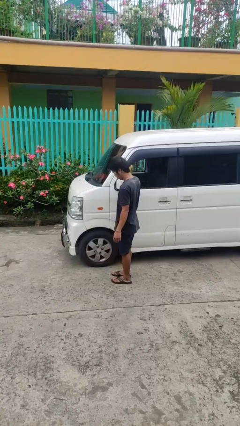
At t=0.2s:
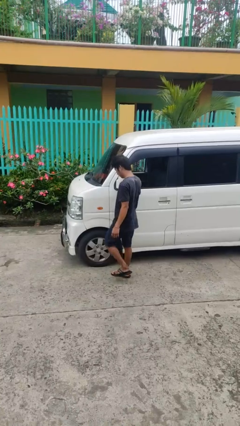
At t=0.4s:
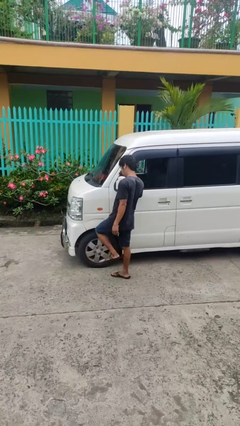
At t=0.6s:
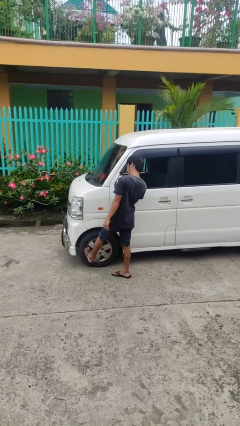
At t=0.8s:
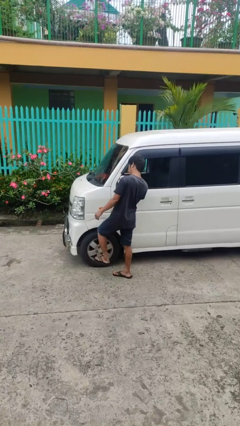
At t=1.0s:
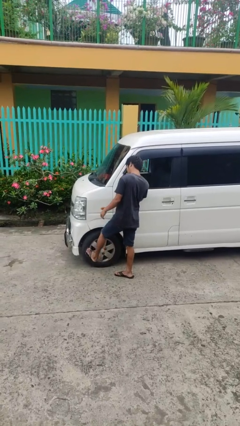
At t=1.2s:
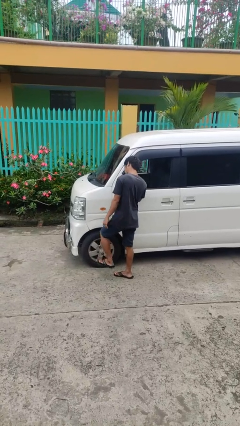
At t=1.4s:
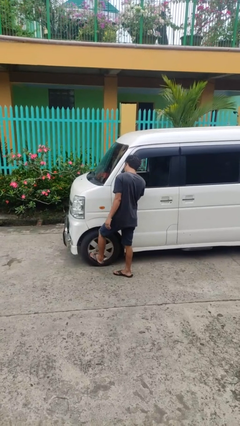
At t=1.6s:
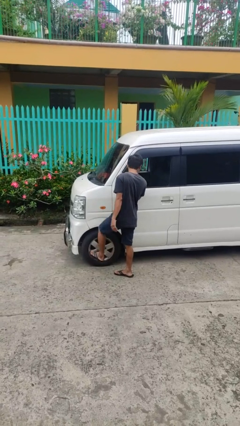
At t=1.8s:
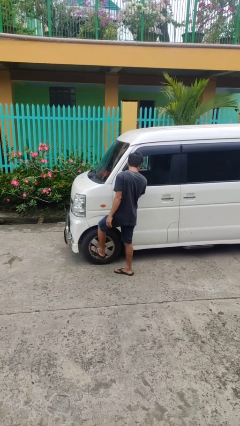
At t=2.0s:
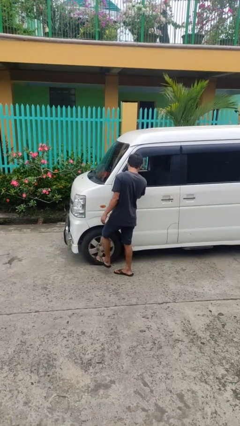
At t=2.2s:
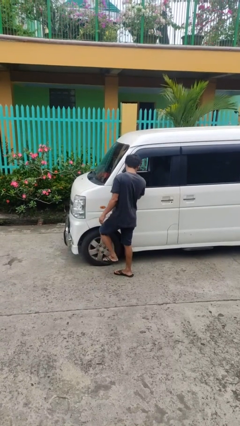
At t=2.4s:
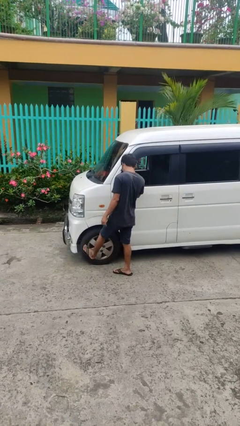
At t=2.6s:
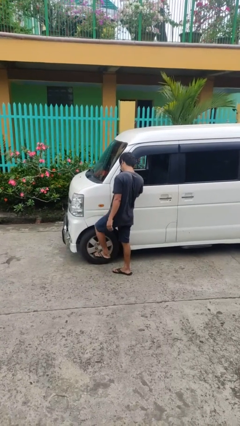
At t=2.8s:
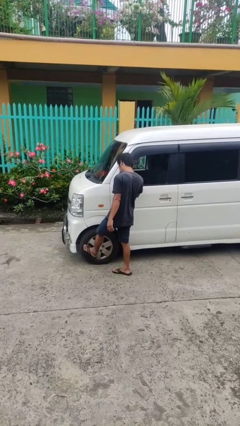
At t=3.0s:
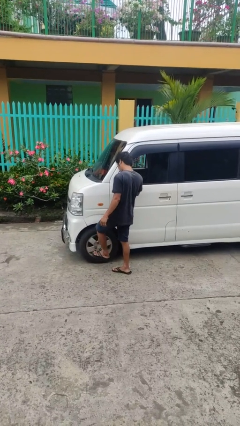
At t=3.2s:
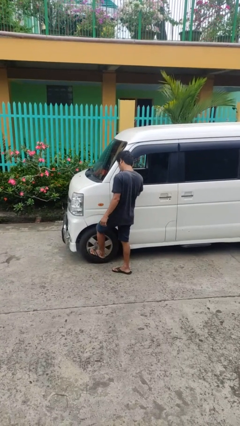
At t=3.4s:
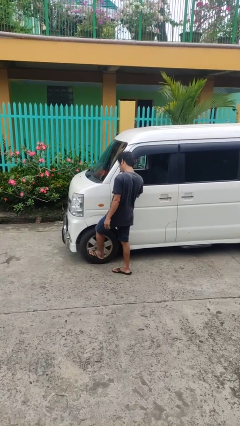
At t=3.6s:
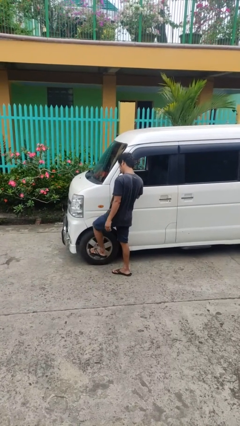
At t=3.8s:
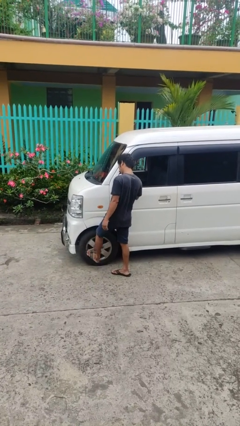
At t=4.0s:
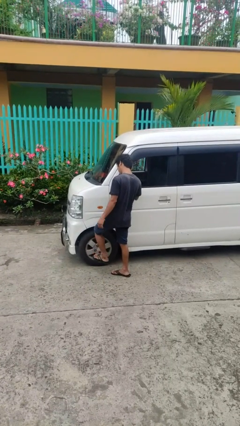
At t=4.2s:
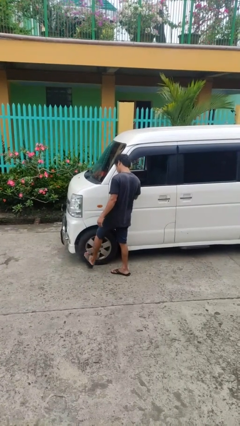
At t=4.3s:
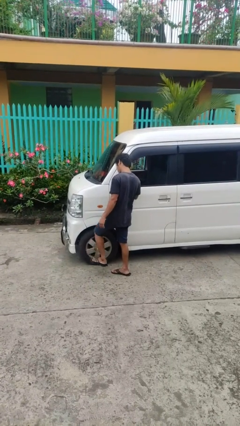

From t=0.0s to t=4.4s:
person kicks car tires

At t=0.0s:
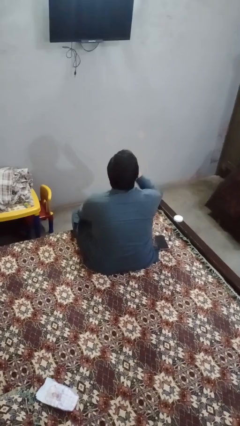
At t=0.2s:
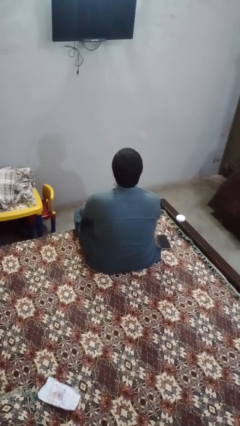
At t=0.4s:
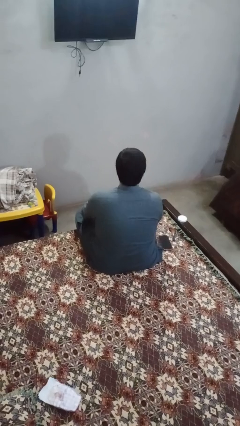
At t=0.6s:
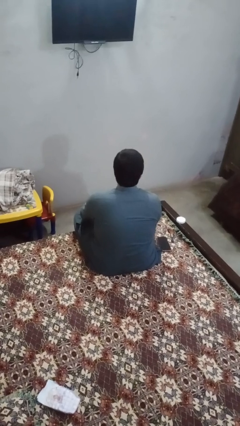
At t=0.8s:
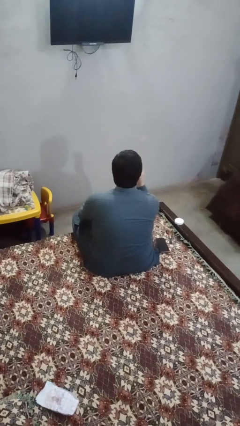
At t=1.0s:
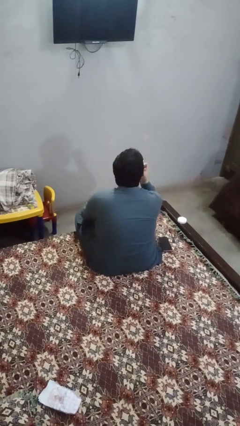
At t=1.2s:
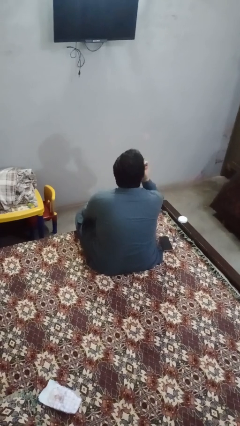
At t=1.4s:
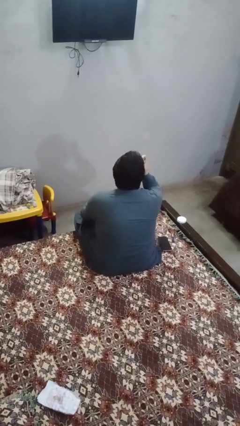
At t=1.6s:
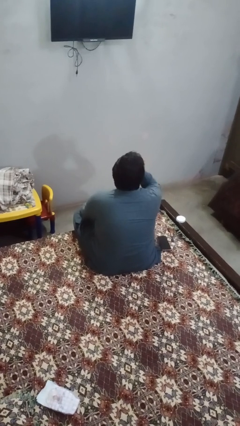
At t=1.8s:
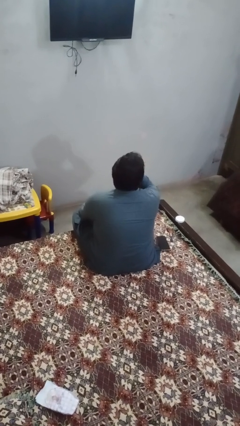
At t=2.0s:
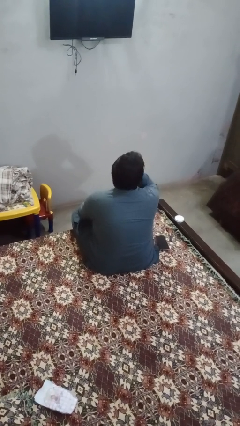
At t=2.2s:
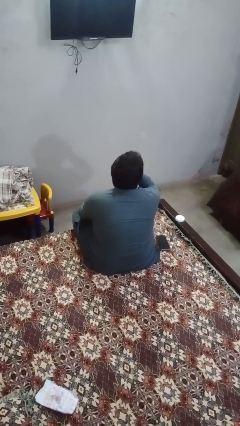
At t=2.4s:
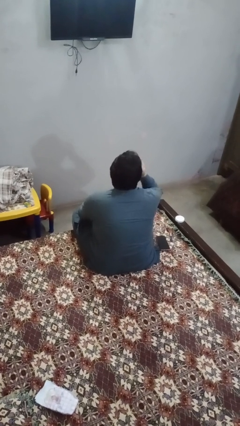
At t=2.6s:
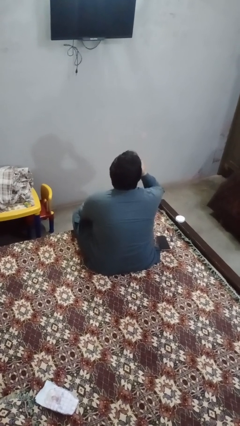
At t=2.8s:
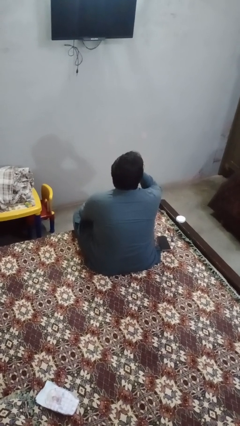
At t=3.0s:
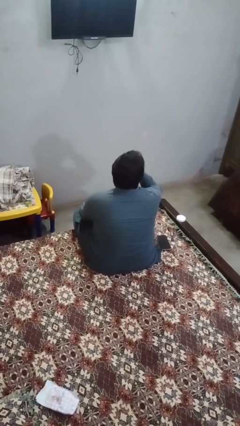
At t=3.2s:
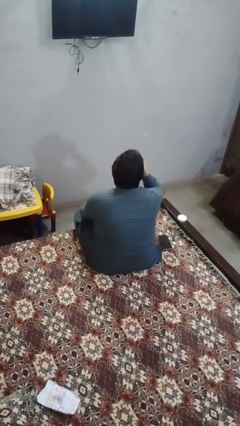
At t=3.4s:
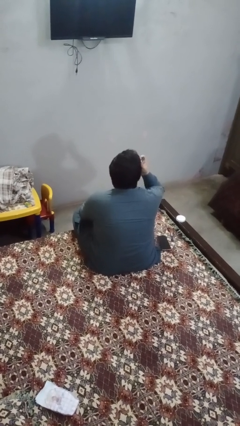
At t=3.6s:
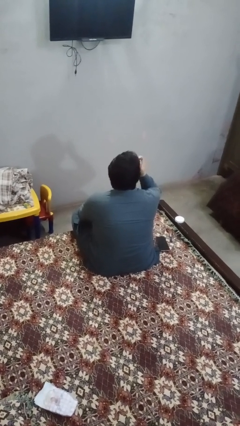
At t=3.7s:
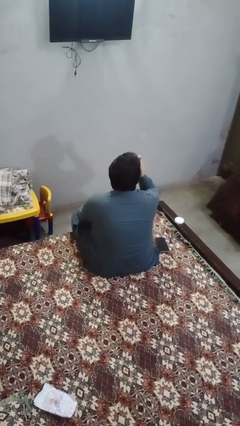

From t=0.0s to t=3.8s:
person applies lip makeup

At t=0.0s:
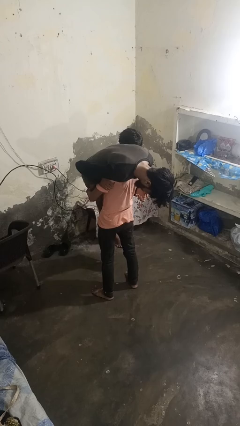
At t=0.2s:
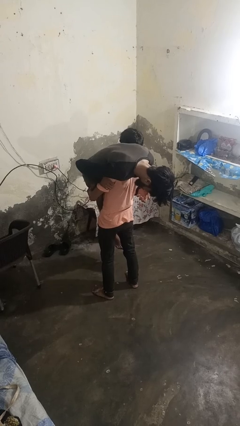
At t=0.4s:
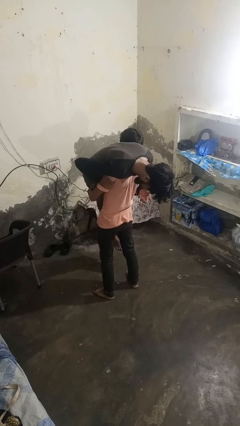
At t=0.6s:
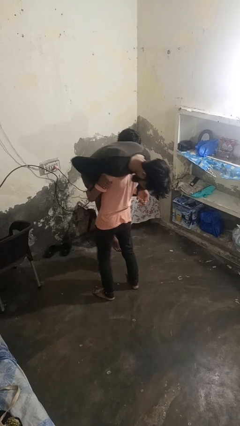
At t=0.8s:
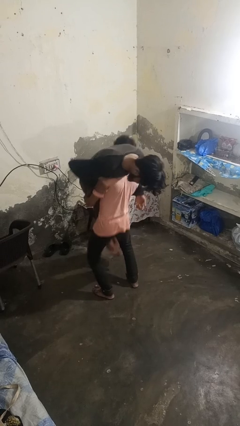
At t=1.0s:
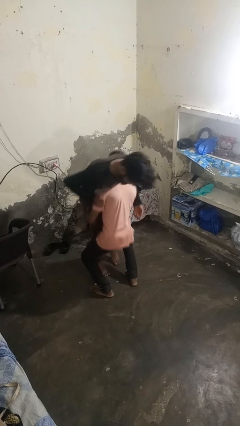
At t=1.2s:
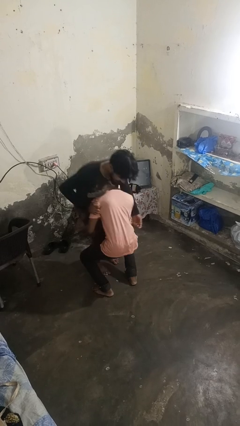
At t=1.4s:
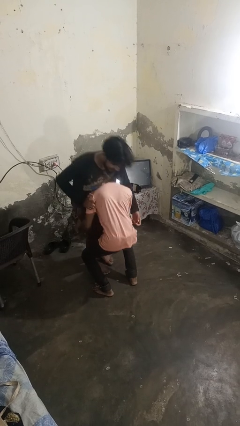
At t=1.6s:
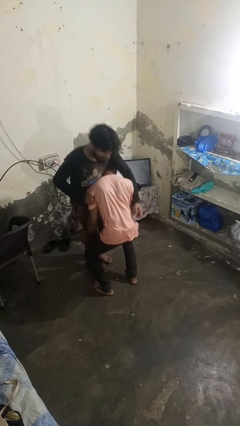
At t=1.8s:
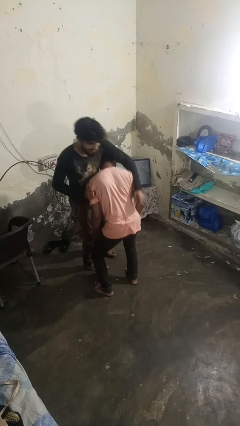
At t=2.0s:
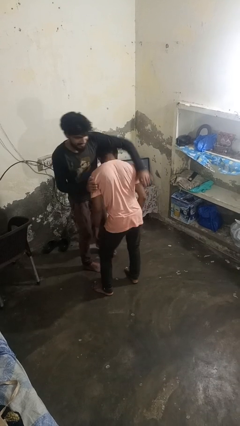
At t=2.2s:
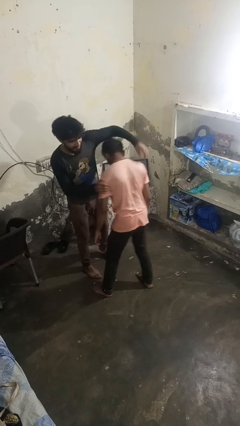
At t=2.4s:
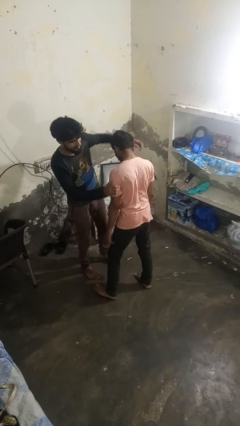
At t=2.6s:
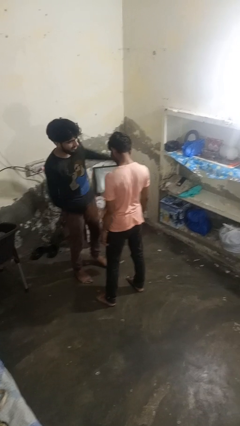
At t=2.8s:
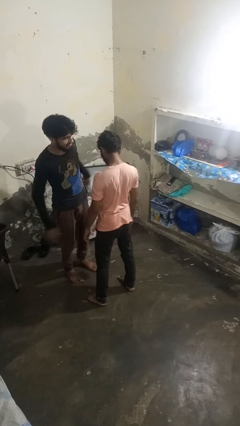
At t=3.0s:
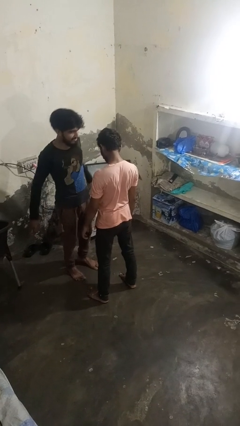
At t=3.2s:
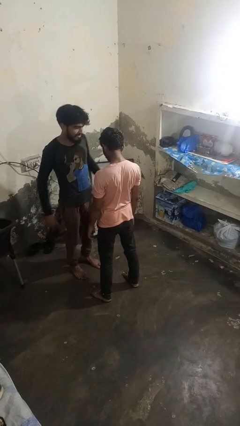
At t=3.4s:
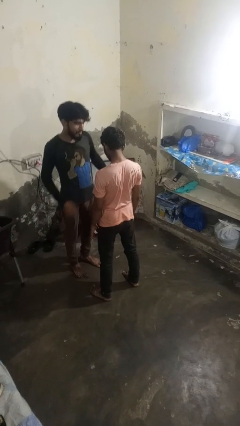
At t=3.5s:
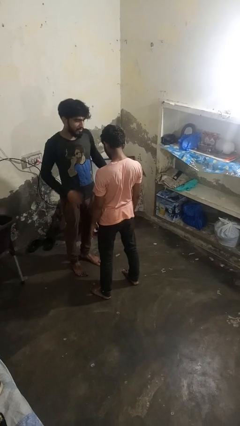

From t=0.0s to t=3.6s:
person puts down person

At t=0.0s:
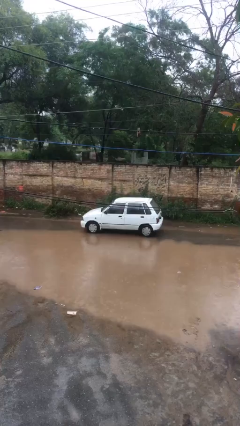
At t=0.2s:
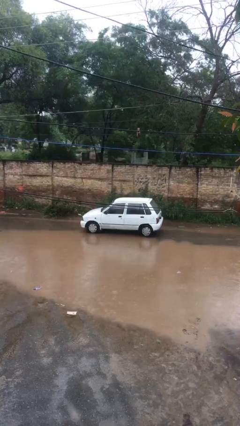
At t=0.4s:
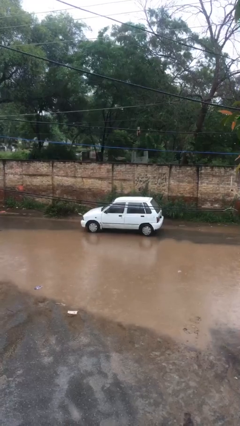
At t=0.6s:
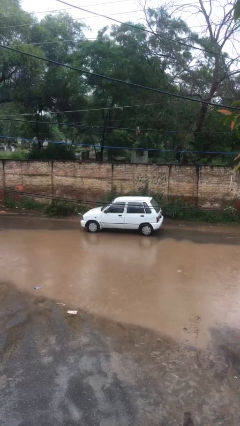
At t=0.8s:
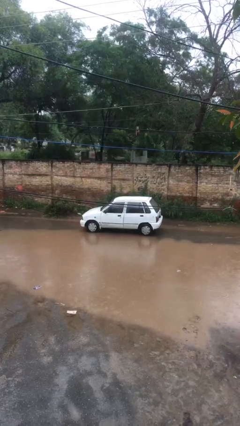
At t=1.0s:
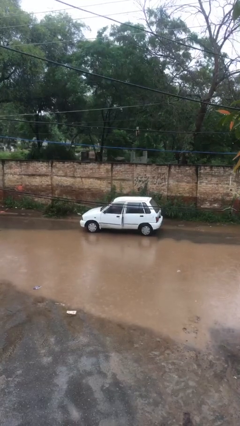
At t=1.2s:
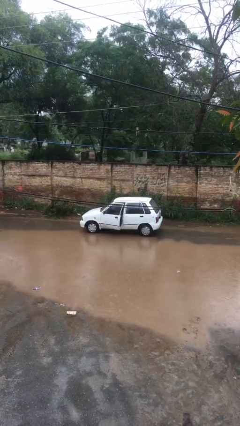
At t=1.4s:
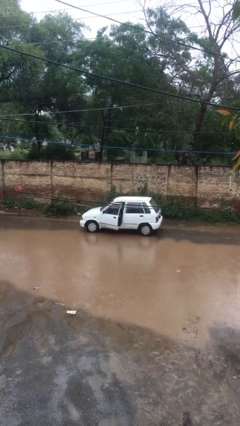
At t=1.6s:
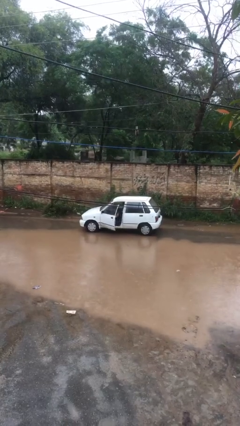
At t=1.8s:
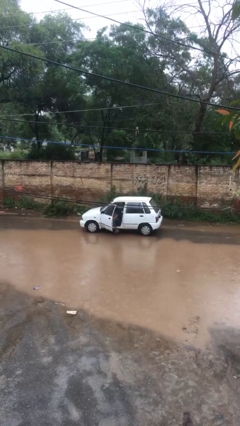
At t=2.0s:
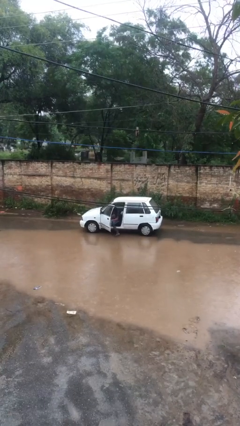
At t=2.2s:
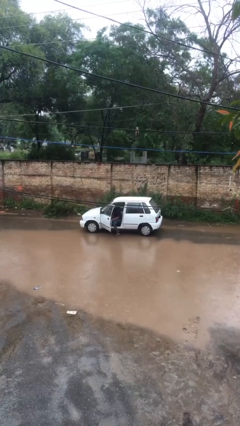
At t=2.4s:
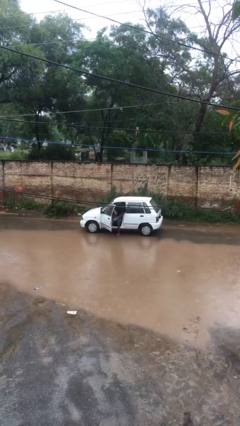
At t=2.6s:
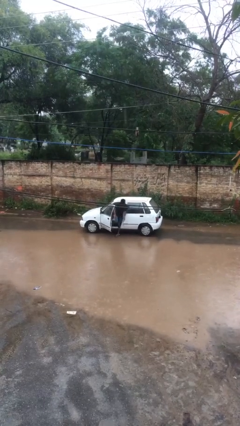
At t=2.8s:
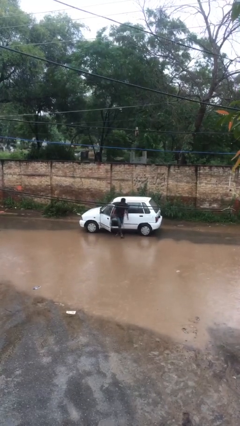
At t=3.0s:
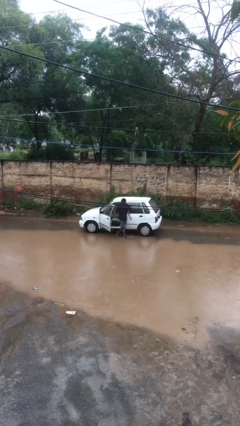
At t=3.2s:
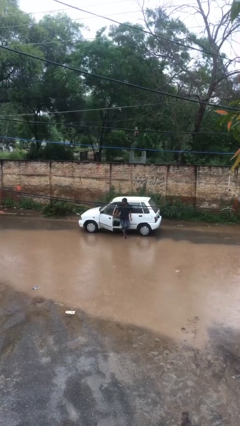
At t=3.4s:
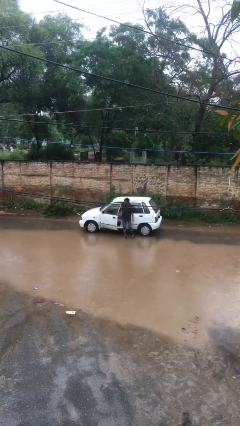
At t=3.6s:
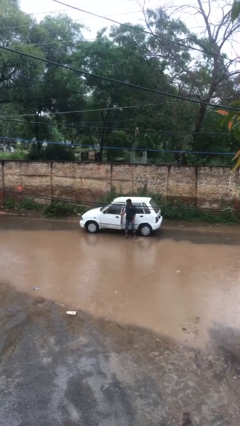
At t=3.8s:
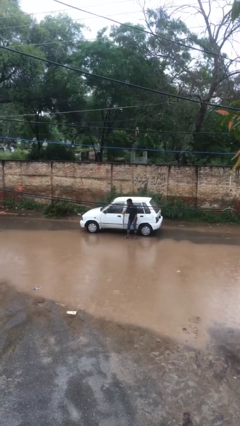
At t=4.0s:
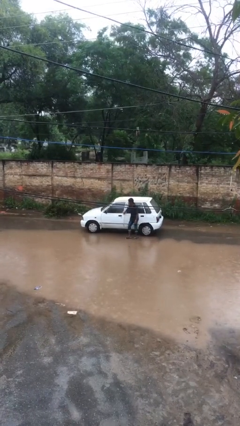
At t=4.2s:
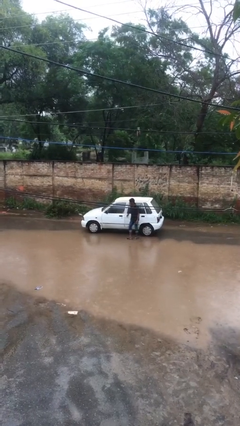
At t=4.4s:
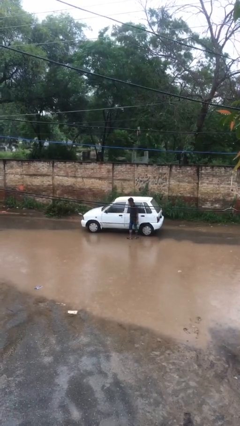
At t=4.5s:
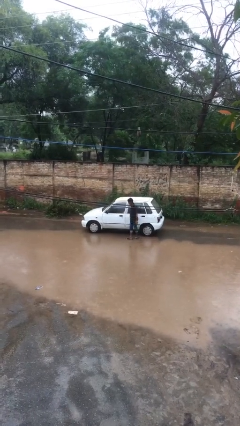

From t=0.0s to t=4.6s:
car drops off person

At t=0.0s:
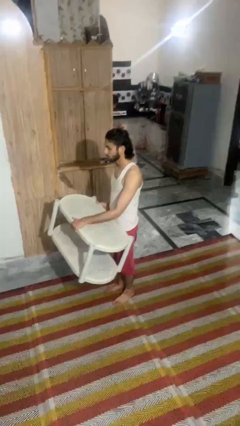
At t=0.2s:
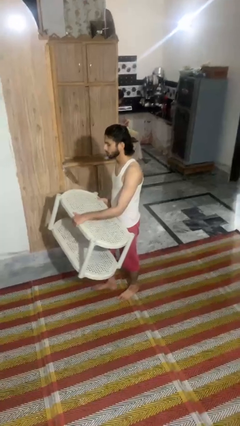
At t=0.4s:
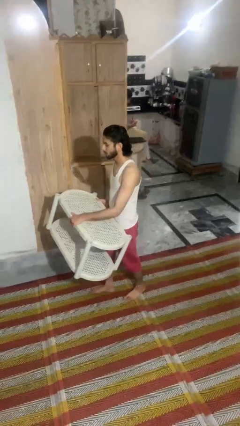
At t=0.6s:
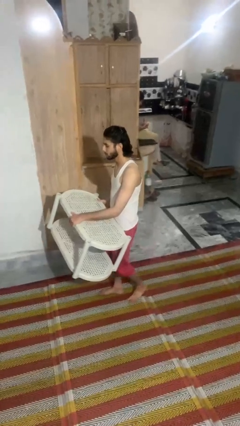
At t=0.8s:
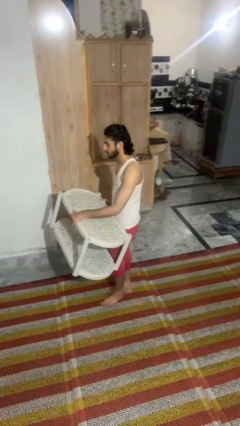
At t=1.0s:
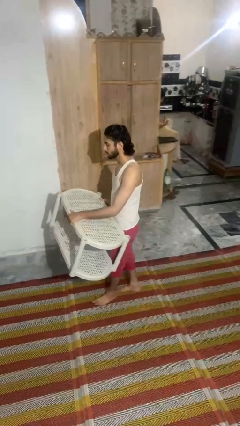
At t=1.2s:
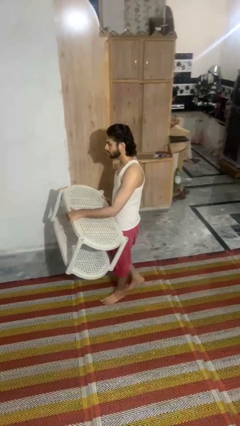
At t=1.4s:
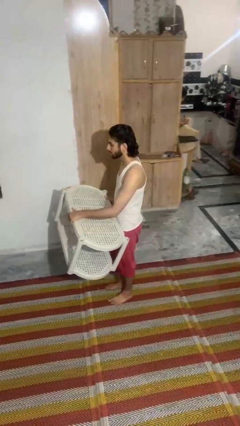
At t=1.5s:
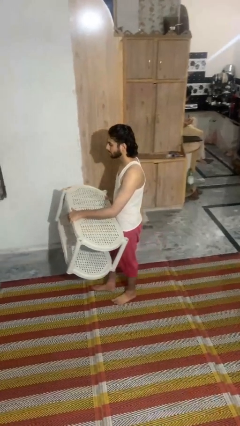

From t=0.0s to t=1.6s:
person carries furniture
